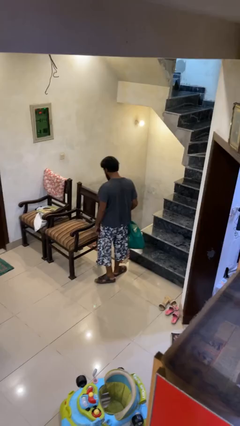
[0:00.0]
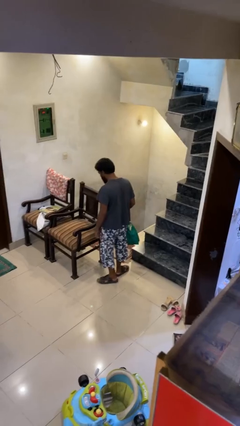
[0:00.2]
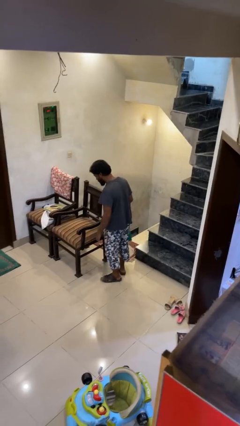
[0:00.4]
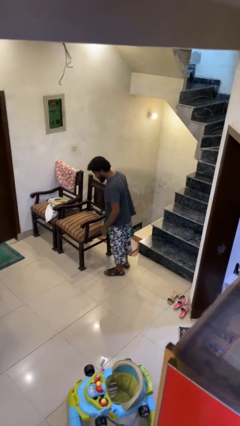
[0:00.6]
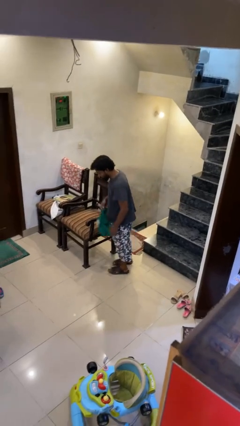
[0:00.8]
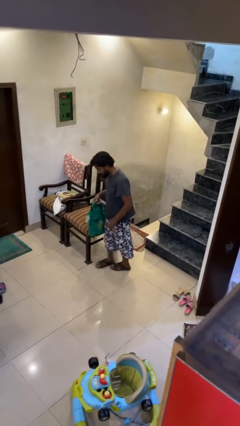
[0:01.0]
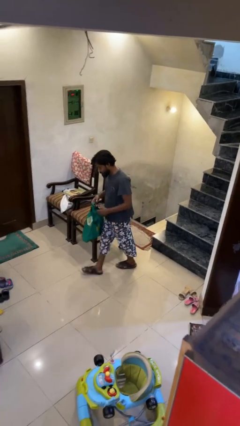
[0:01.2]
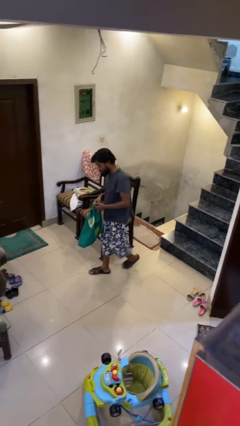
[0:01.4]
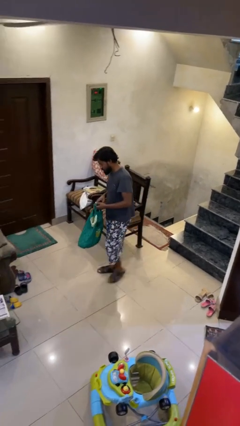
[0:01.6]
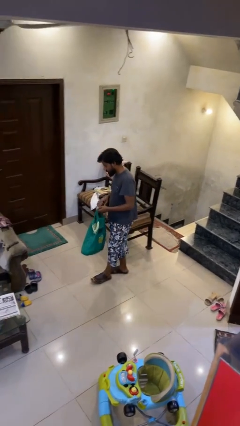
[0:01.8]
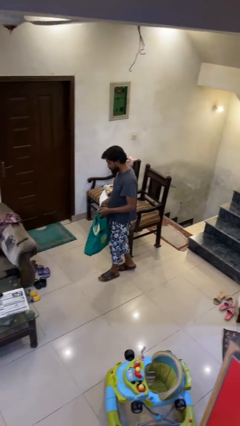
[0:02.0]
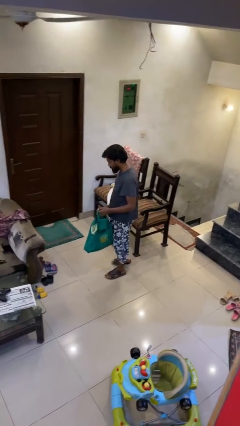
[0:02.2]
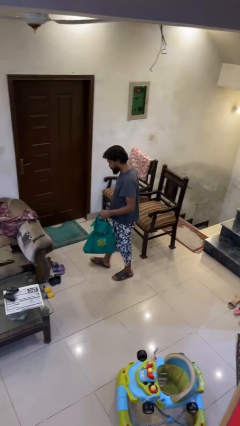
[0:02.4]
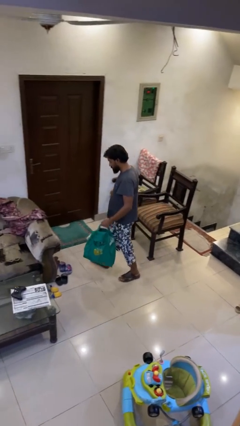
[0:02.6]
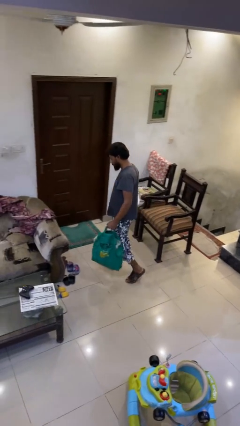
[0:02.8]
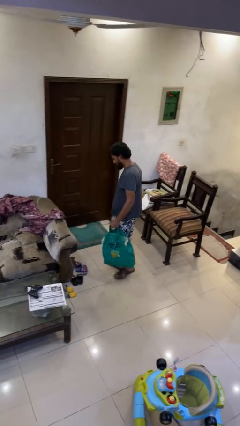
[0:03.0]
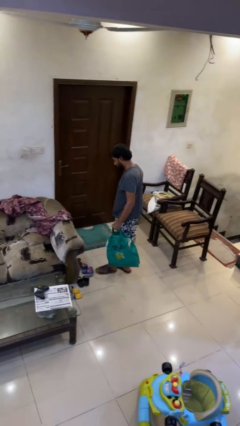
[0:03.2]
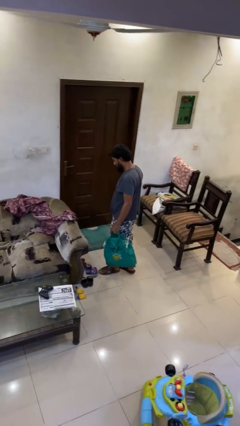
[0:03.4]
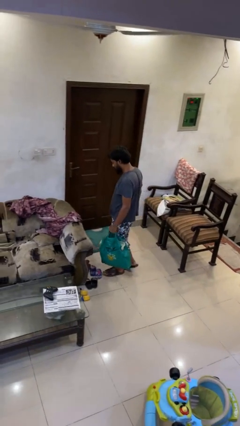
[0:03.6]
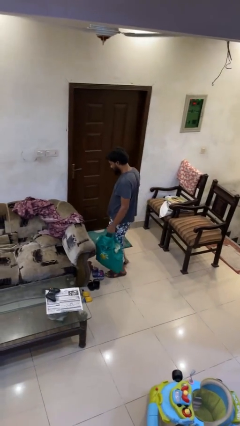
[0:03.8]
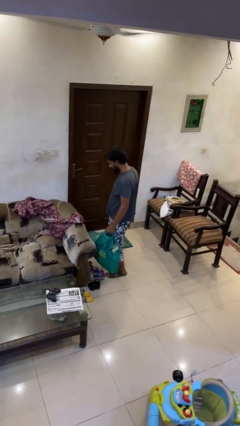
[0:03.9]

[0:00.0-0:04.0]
person carries groceries

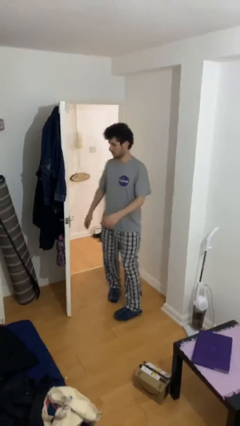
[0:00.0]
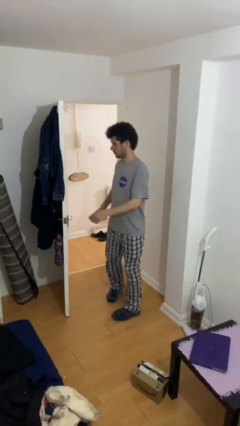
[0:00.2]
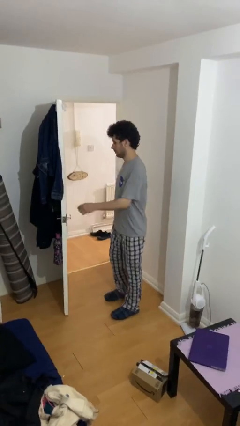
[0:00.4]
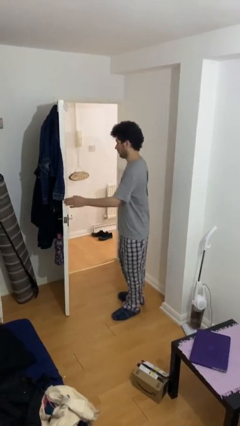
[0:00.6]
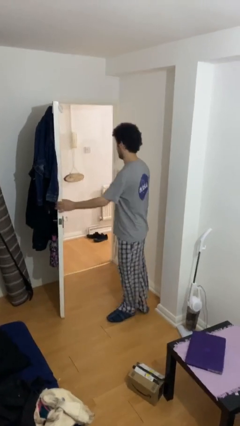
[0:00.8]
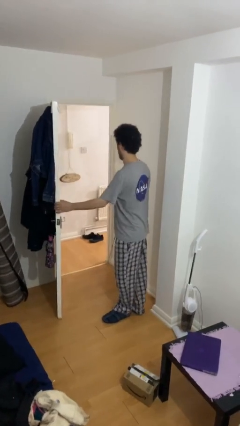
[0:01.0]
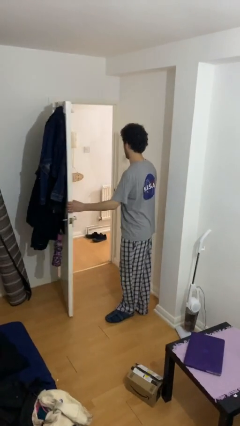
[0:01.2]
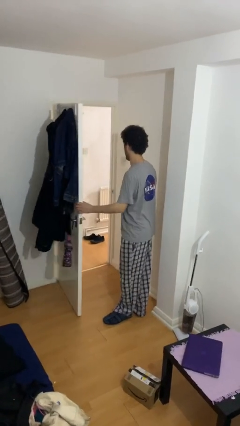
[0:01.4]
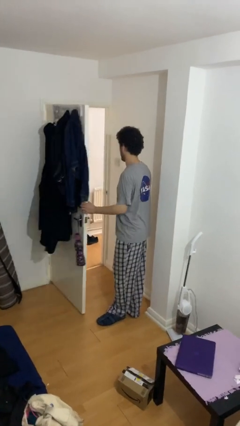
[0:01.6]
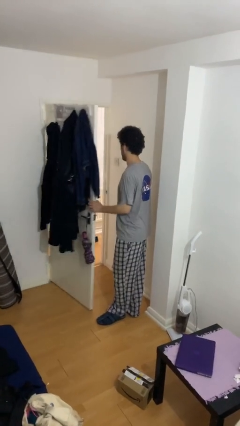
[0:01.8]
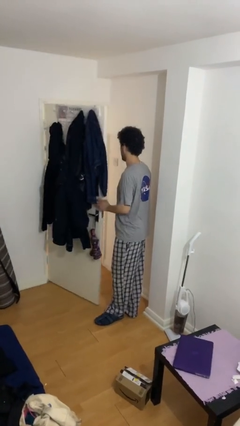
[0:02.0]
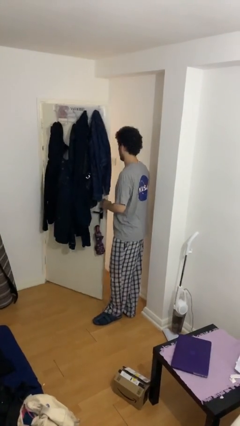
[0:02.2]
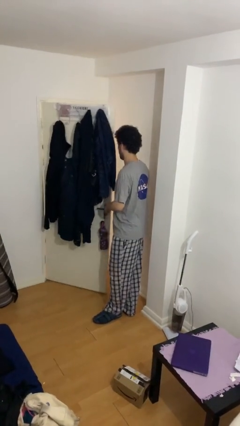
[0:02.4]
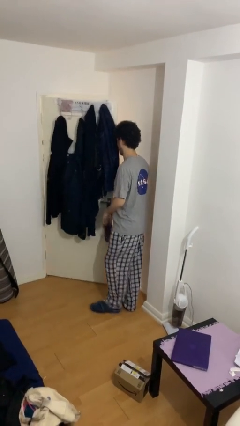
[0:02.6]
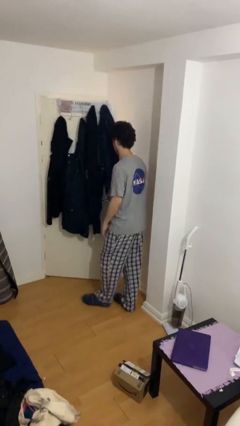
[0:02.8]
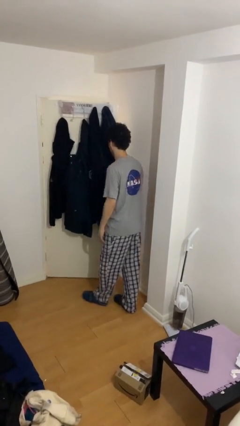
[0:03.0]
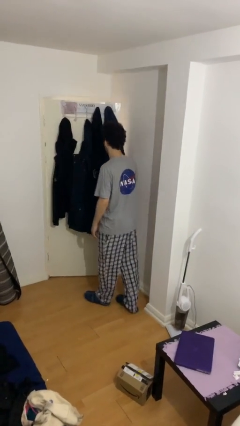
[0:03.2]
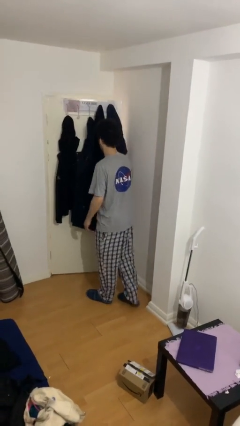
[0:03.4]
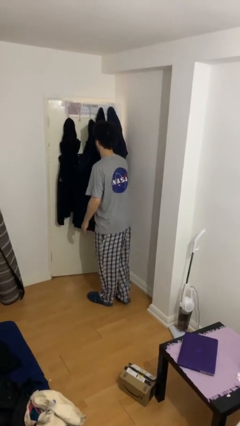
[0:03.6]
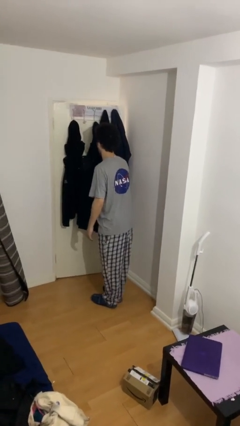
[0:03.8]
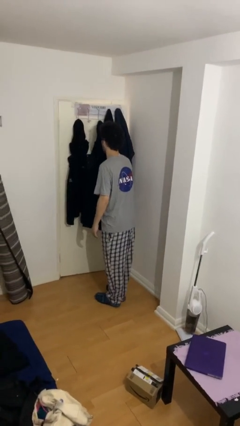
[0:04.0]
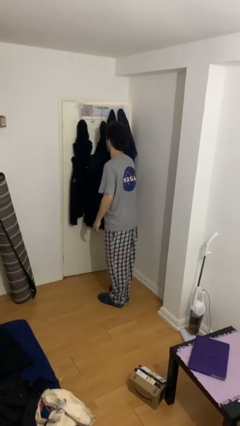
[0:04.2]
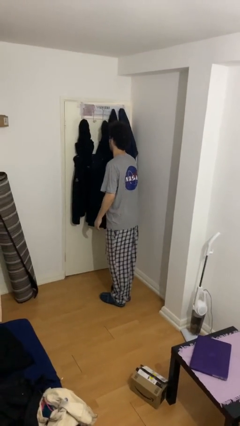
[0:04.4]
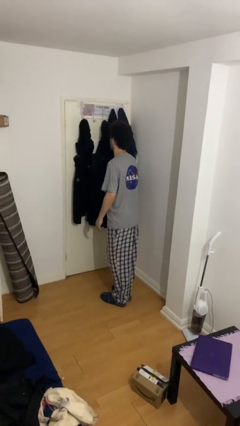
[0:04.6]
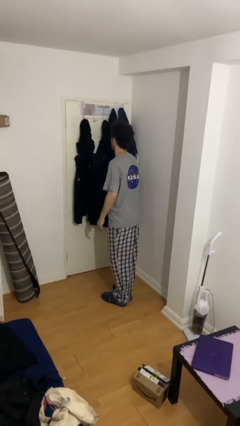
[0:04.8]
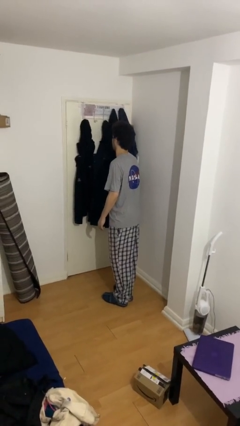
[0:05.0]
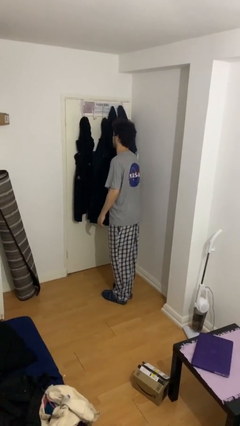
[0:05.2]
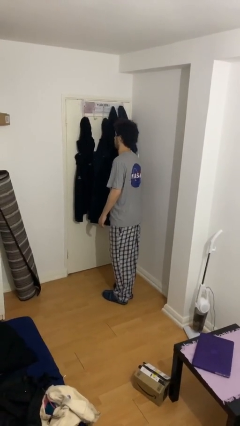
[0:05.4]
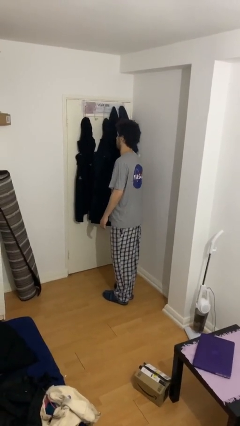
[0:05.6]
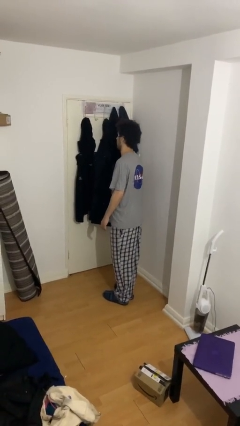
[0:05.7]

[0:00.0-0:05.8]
person closes facility door

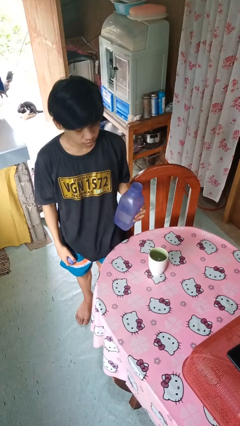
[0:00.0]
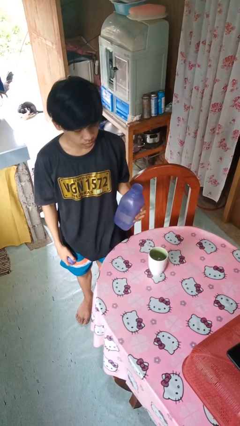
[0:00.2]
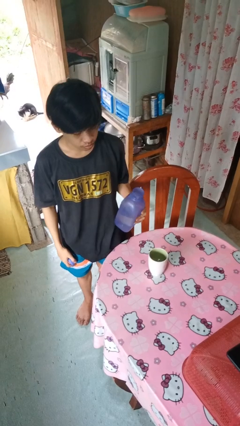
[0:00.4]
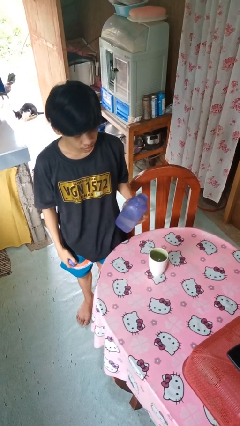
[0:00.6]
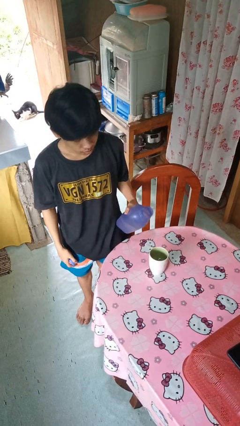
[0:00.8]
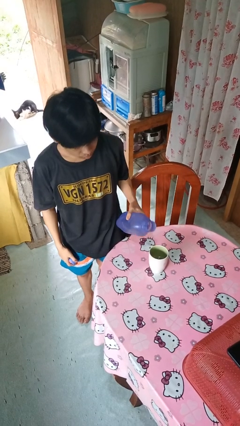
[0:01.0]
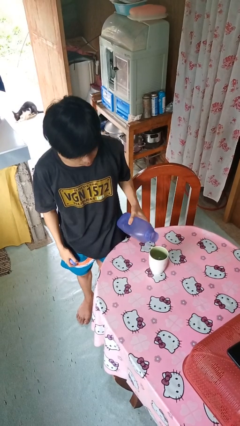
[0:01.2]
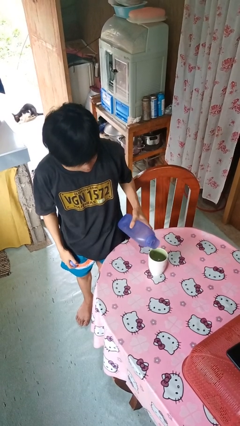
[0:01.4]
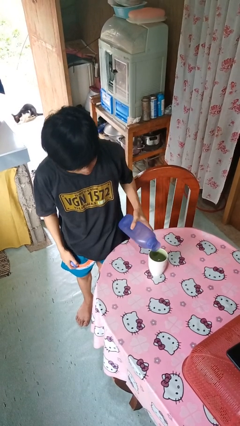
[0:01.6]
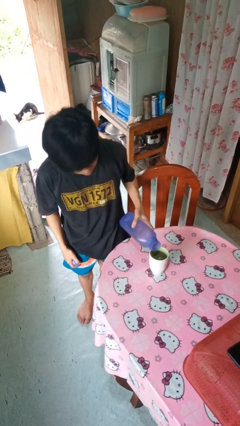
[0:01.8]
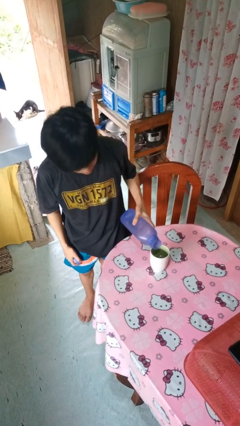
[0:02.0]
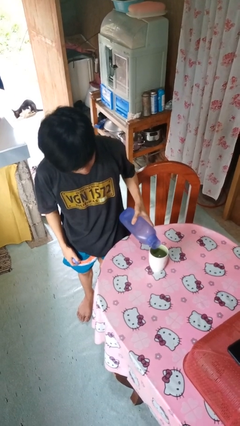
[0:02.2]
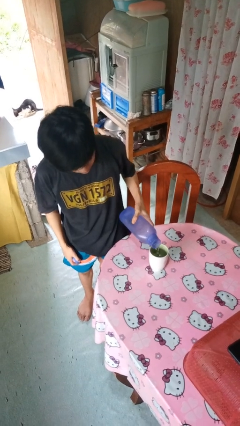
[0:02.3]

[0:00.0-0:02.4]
person pours liquid into cup

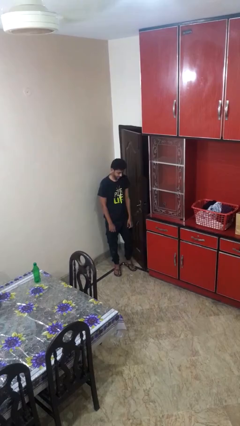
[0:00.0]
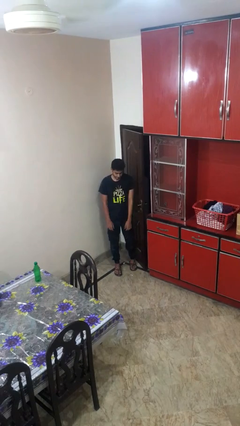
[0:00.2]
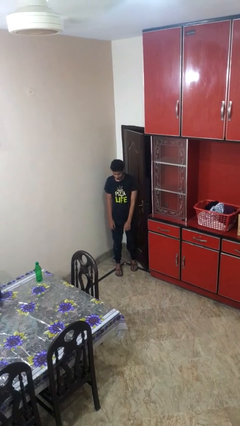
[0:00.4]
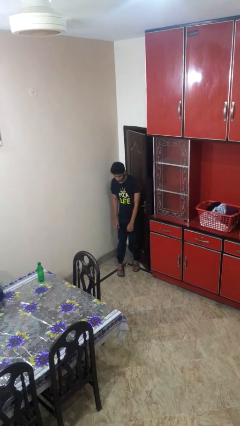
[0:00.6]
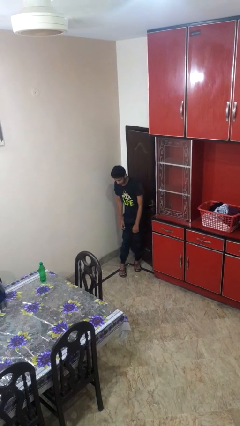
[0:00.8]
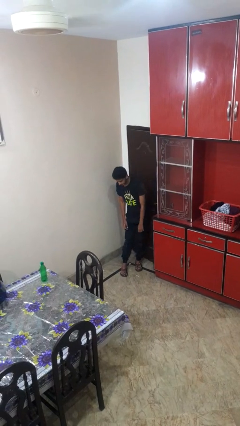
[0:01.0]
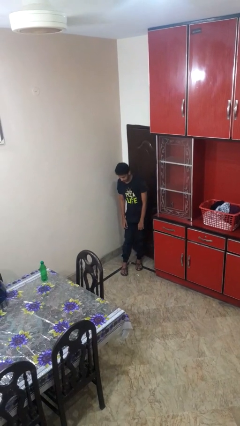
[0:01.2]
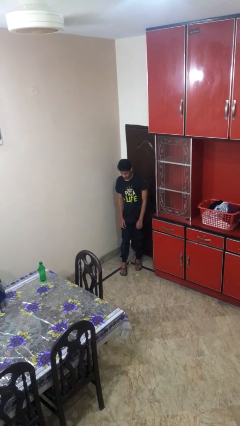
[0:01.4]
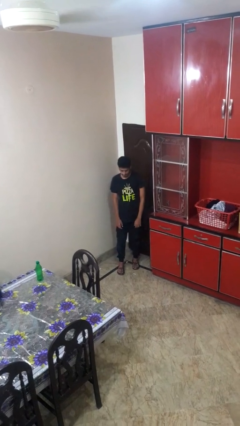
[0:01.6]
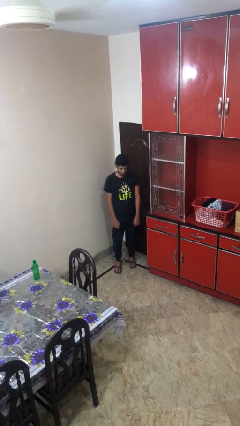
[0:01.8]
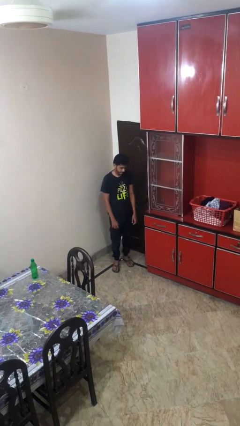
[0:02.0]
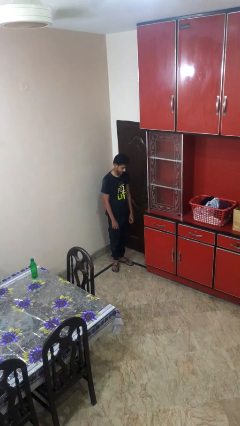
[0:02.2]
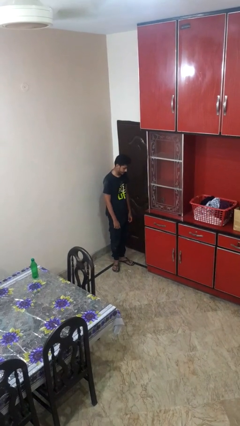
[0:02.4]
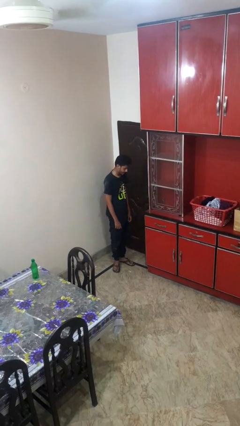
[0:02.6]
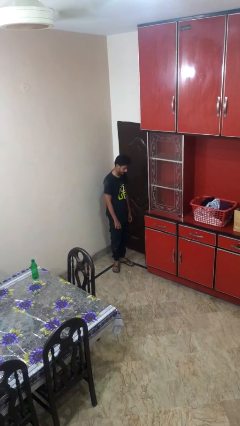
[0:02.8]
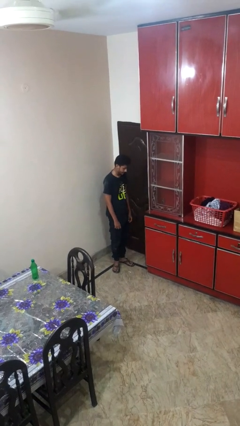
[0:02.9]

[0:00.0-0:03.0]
person closes door with hip

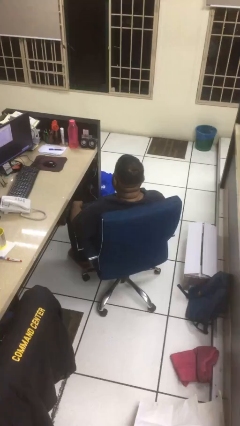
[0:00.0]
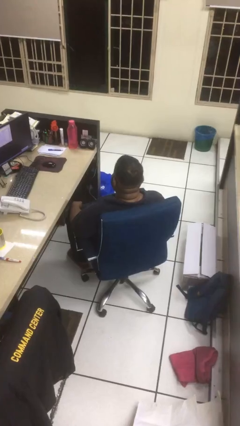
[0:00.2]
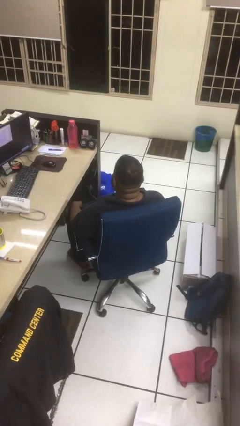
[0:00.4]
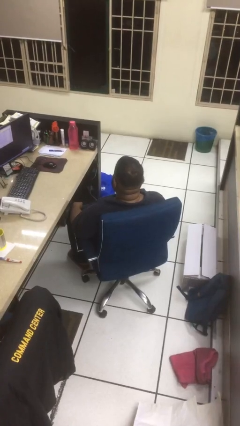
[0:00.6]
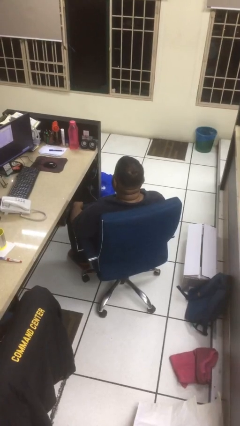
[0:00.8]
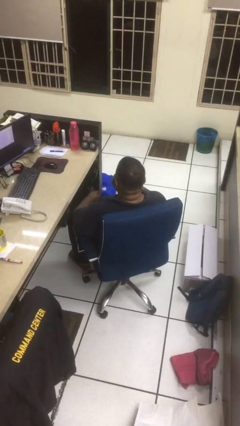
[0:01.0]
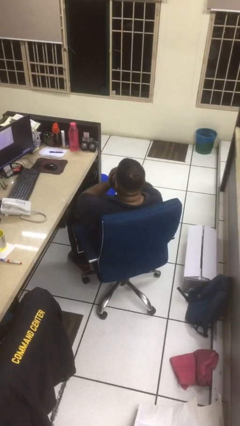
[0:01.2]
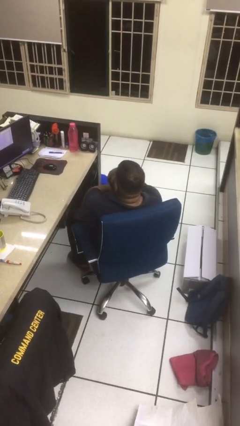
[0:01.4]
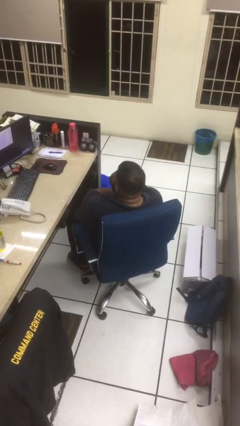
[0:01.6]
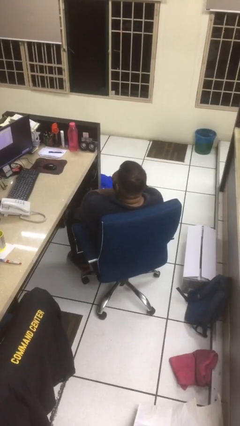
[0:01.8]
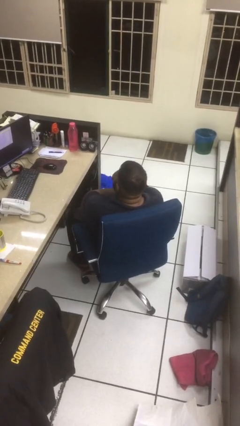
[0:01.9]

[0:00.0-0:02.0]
person strokes chin

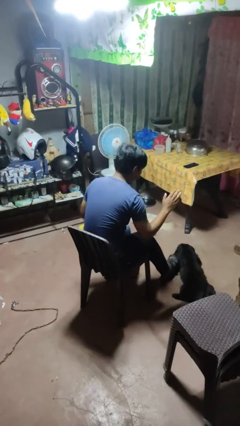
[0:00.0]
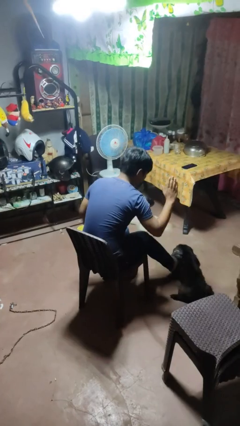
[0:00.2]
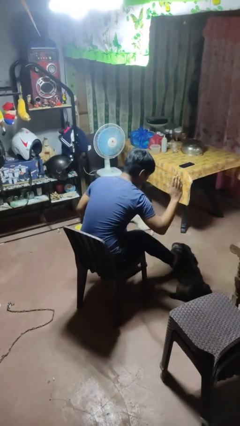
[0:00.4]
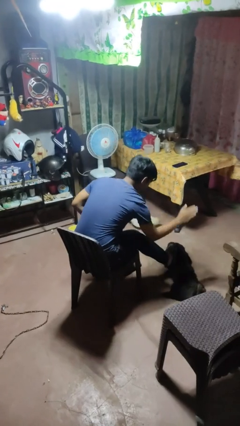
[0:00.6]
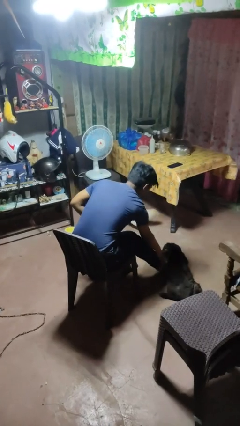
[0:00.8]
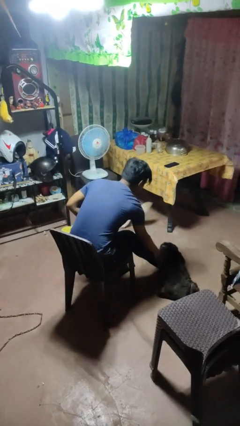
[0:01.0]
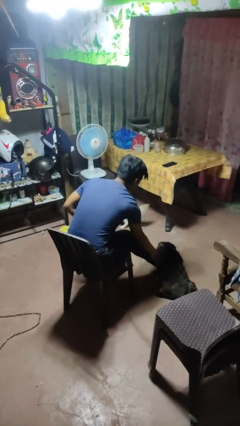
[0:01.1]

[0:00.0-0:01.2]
person swats bug
